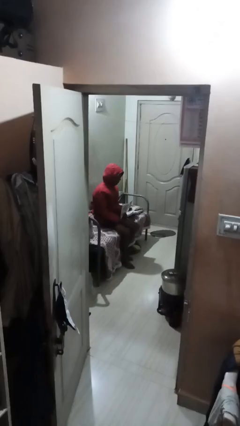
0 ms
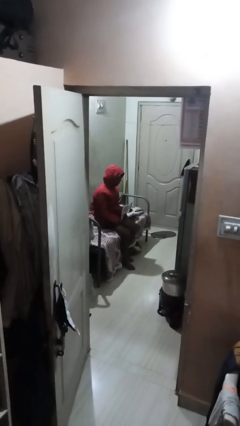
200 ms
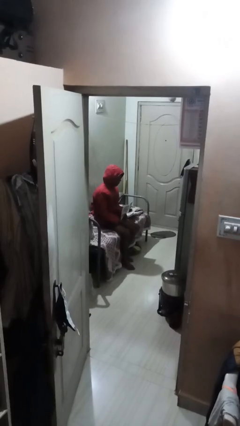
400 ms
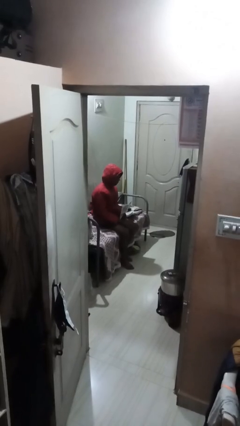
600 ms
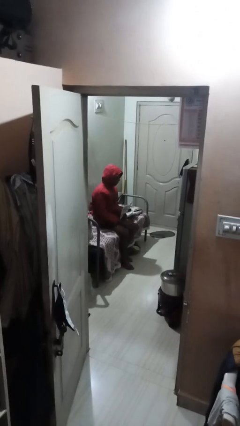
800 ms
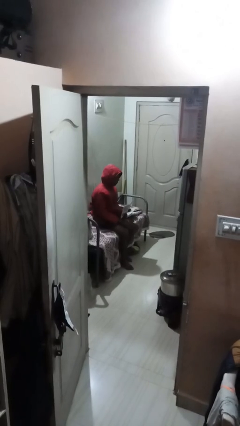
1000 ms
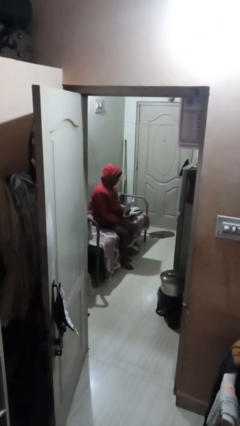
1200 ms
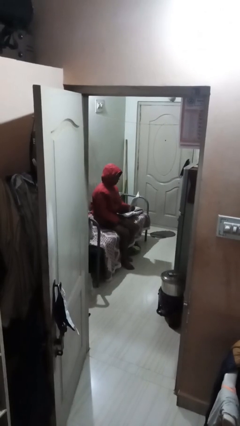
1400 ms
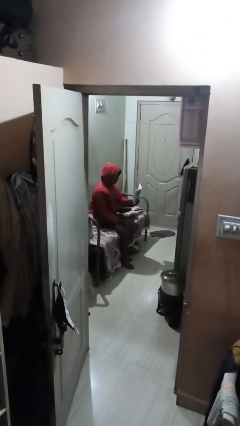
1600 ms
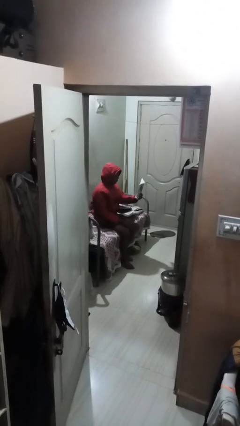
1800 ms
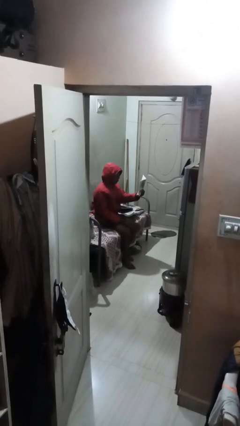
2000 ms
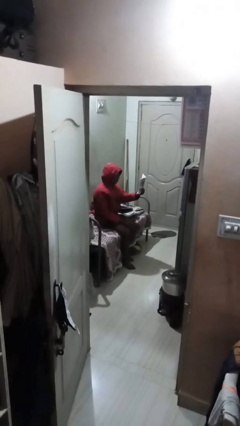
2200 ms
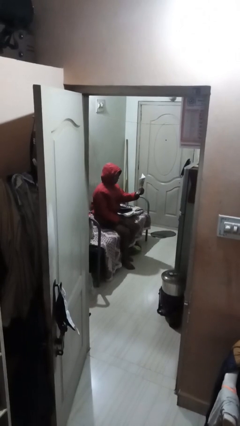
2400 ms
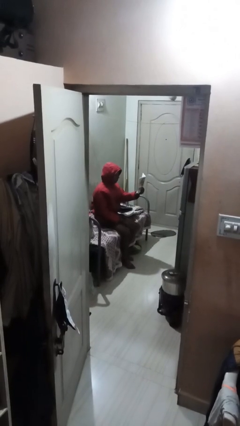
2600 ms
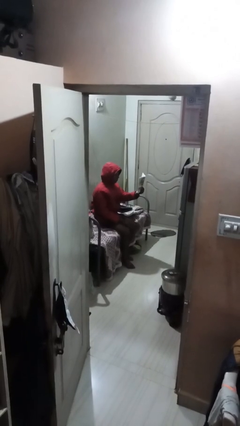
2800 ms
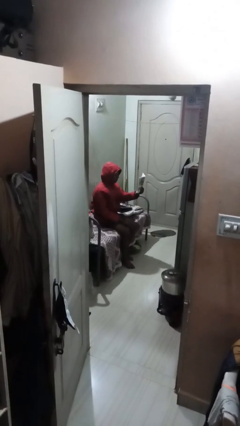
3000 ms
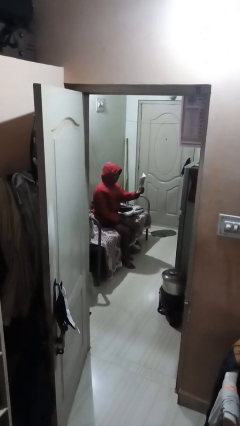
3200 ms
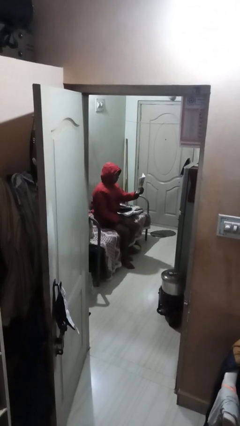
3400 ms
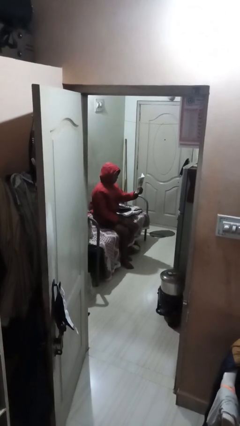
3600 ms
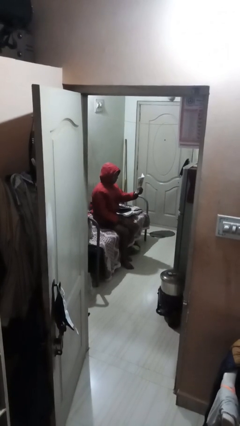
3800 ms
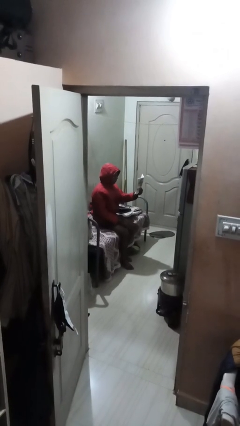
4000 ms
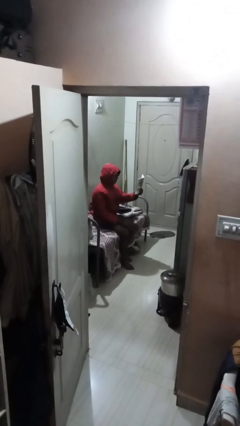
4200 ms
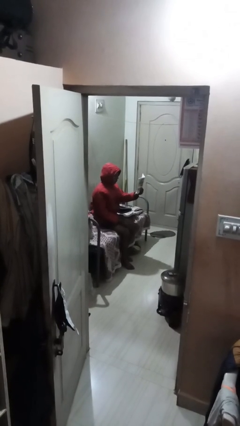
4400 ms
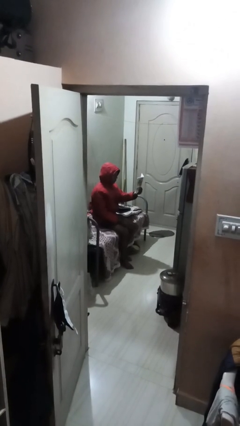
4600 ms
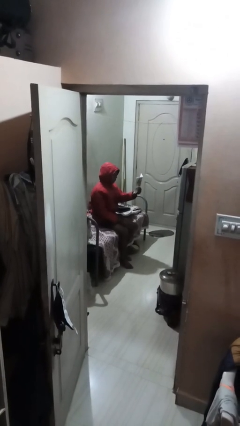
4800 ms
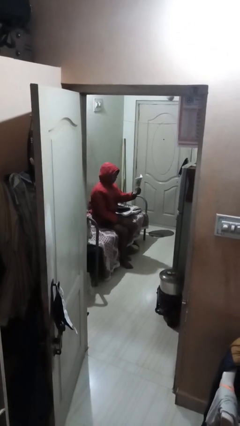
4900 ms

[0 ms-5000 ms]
person reads document

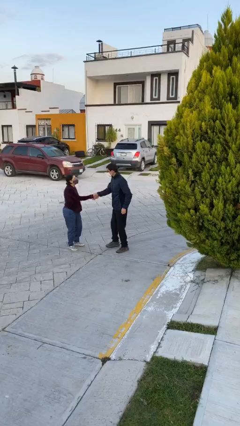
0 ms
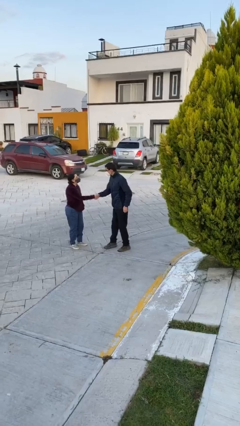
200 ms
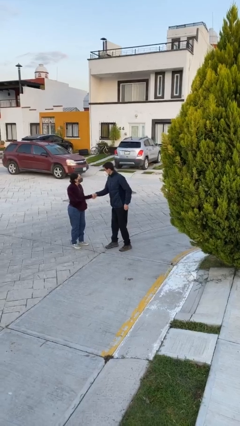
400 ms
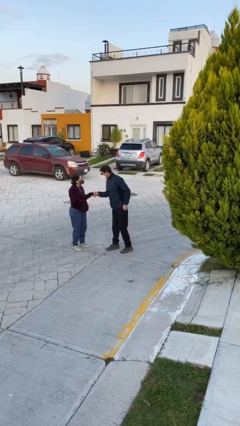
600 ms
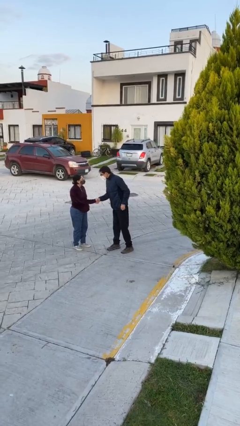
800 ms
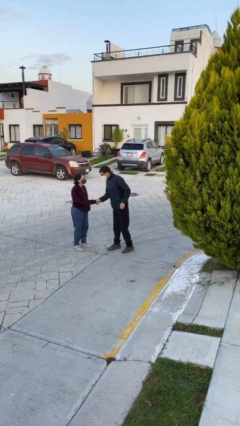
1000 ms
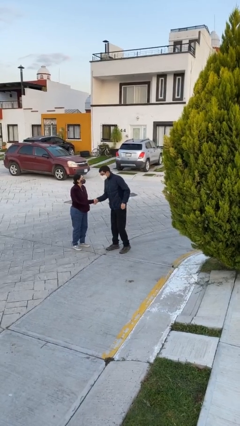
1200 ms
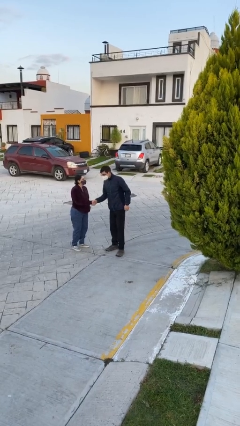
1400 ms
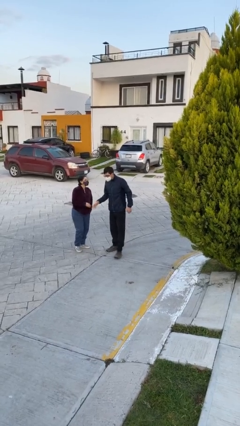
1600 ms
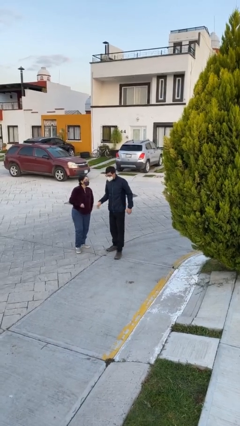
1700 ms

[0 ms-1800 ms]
person shakes hand

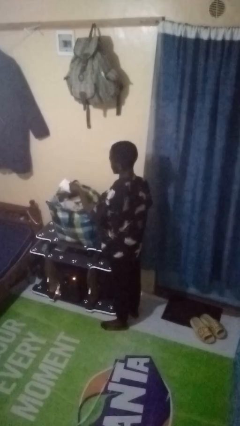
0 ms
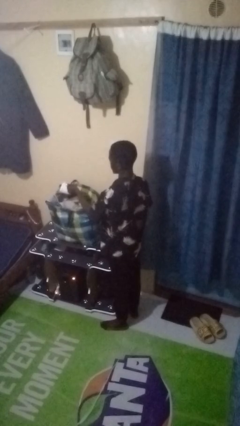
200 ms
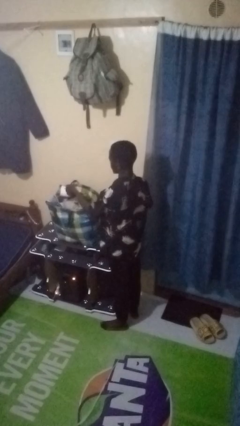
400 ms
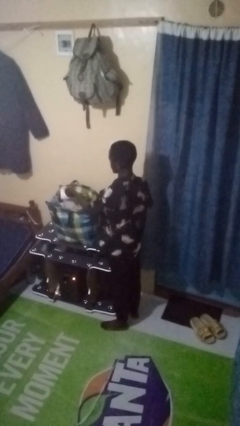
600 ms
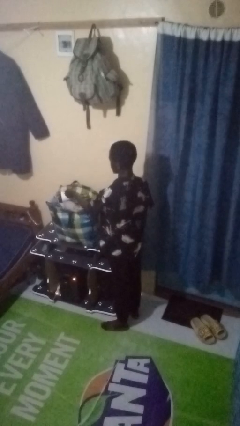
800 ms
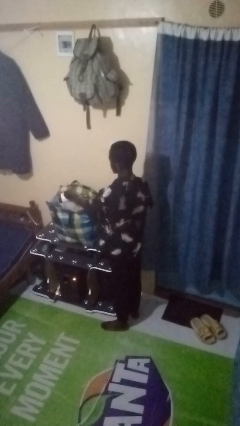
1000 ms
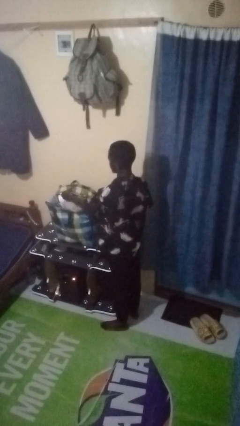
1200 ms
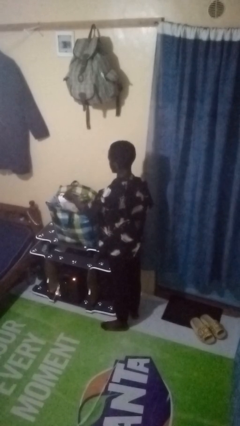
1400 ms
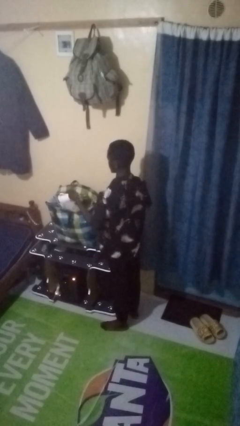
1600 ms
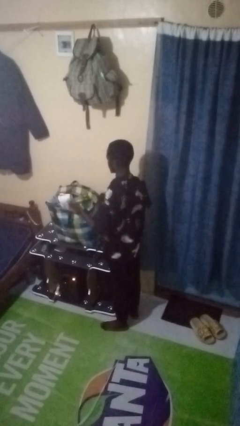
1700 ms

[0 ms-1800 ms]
person puts object into bag

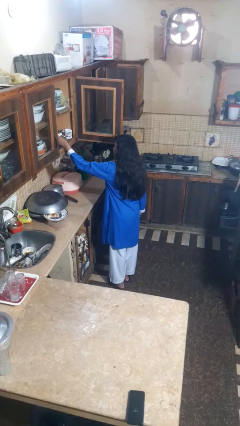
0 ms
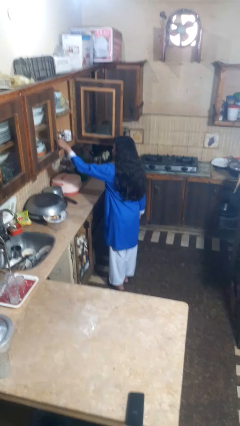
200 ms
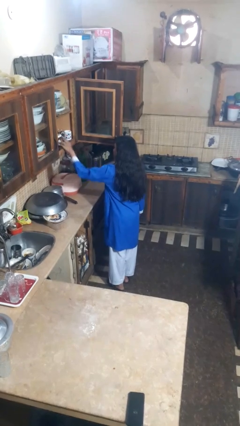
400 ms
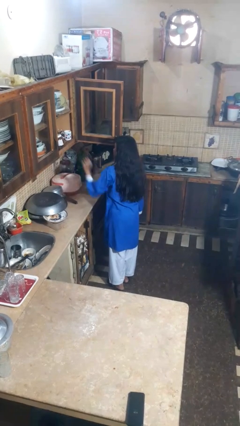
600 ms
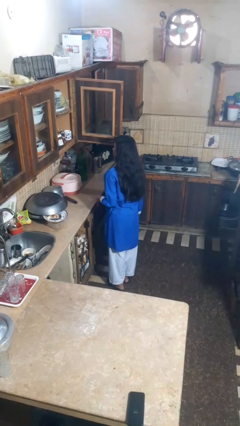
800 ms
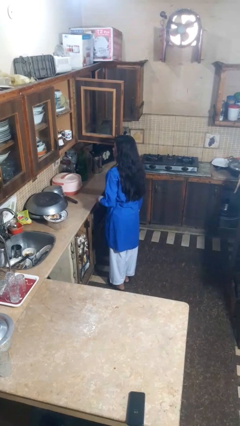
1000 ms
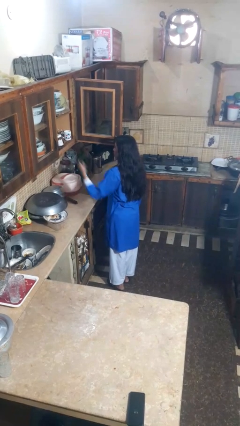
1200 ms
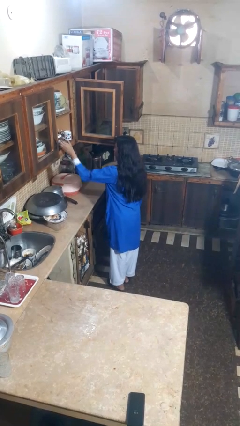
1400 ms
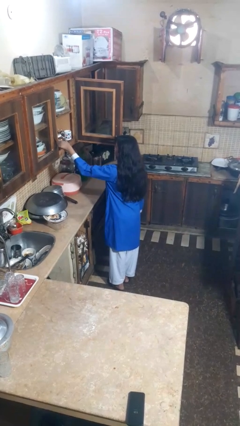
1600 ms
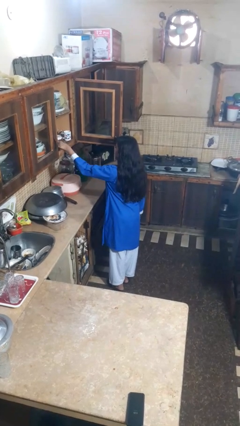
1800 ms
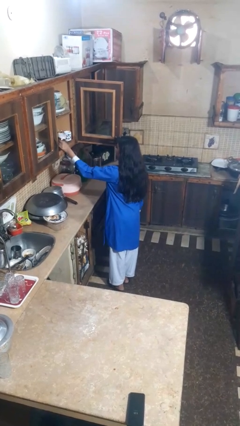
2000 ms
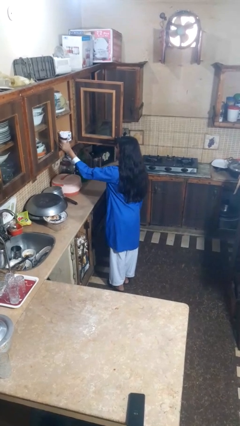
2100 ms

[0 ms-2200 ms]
person takes object from cabinet

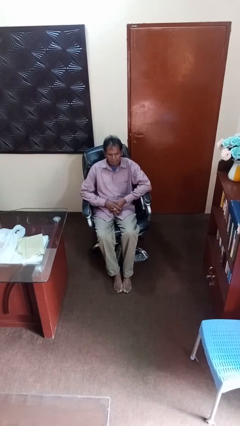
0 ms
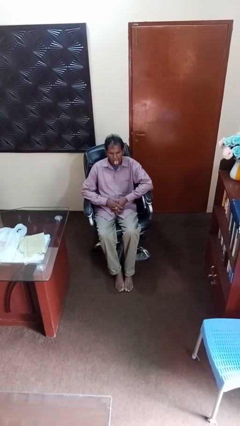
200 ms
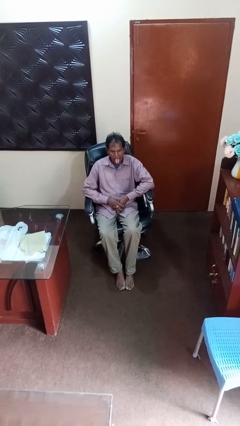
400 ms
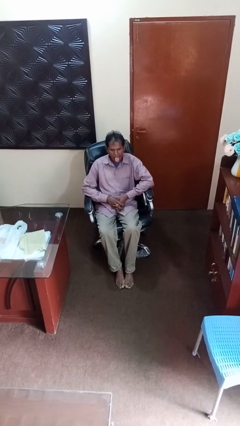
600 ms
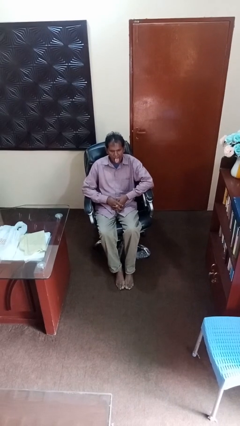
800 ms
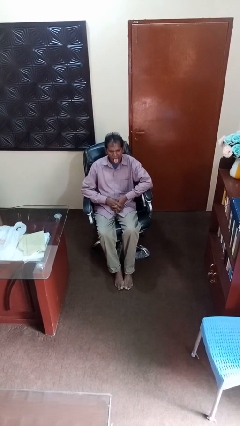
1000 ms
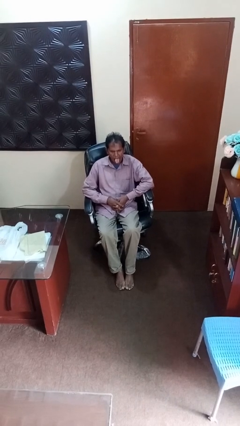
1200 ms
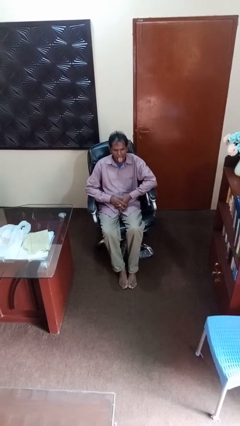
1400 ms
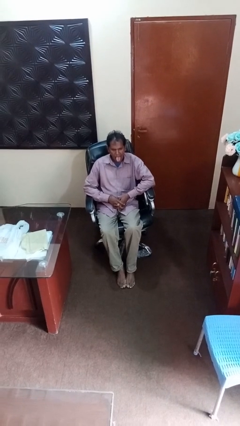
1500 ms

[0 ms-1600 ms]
person sticks out tongue

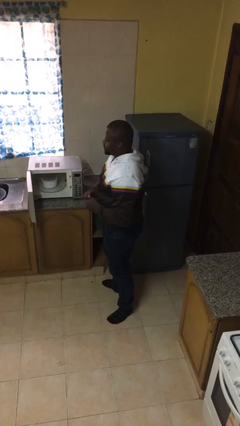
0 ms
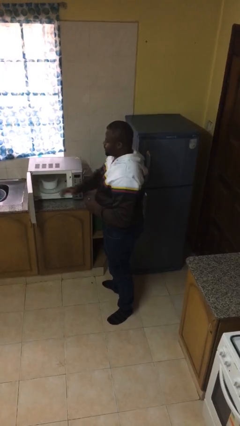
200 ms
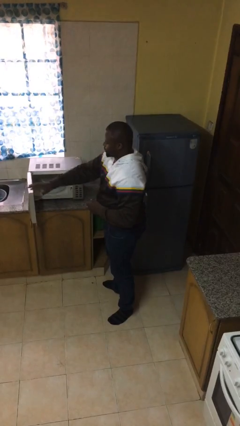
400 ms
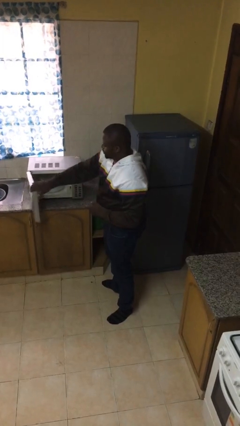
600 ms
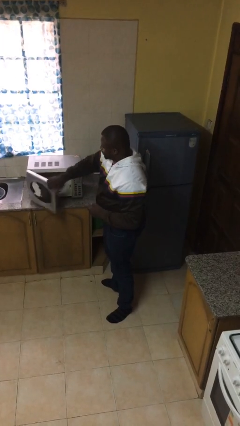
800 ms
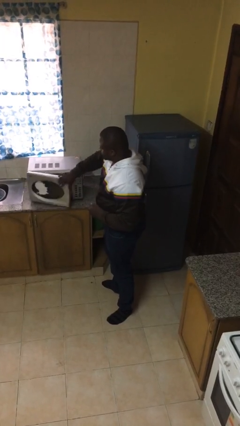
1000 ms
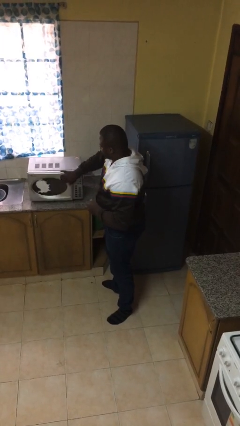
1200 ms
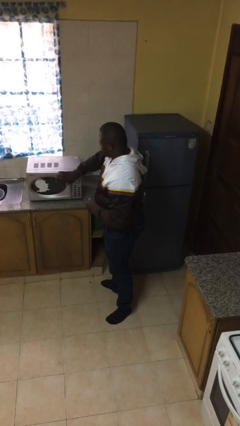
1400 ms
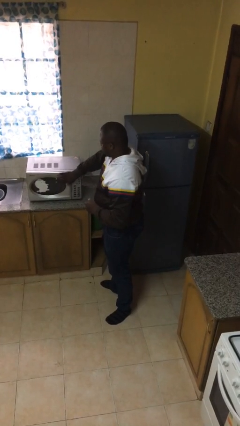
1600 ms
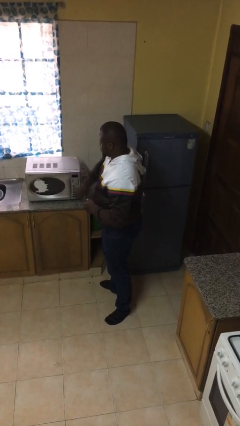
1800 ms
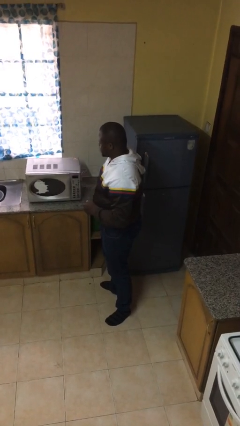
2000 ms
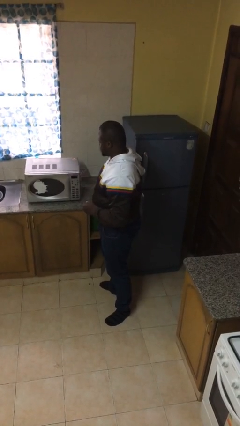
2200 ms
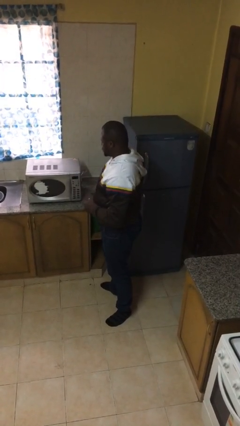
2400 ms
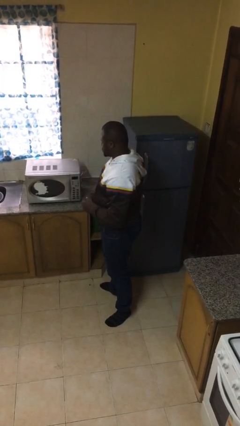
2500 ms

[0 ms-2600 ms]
person closes microwave

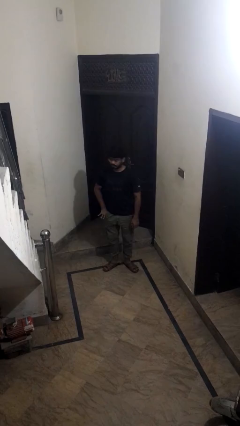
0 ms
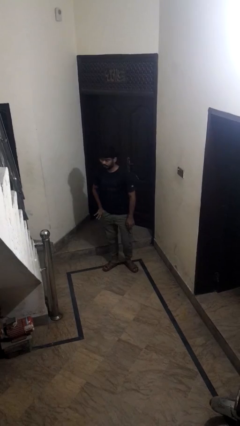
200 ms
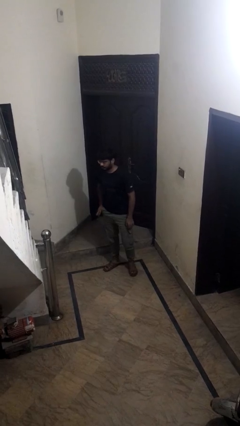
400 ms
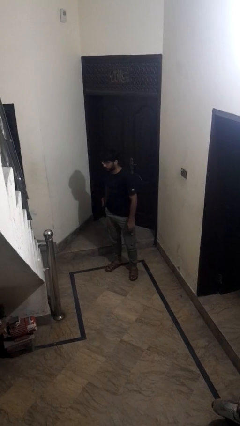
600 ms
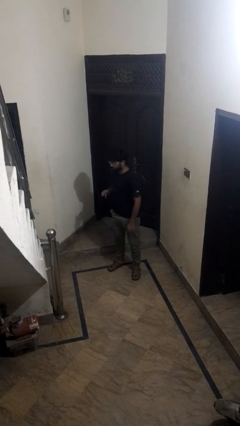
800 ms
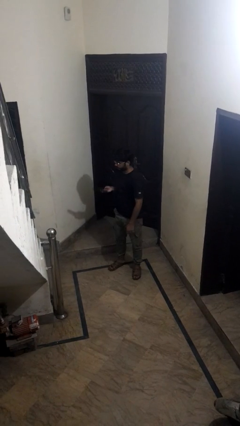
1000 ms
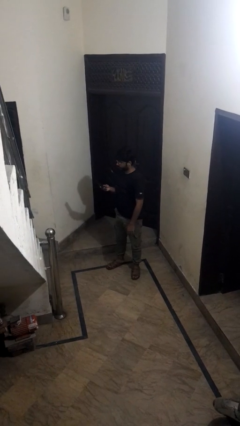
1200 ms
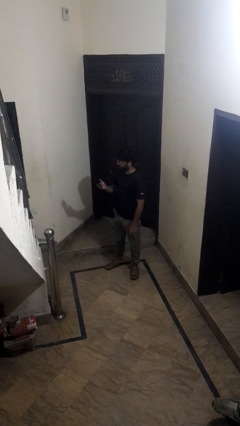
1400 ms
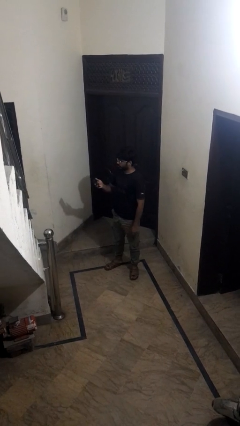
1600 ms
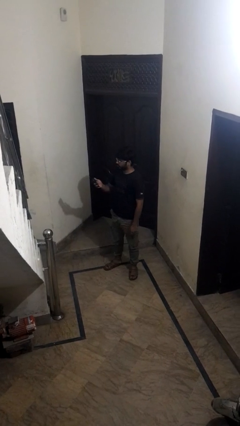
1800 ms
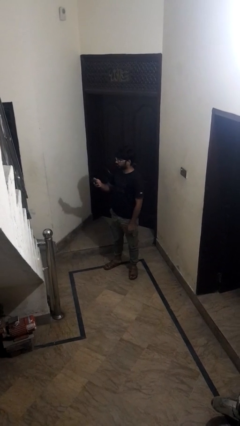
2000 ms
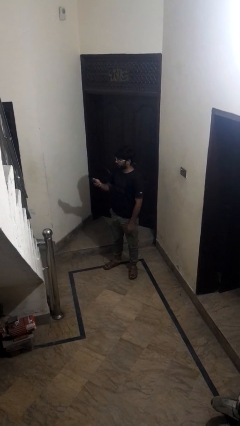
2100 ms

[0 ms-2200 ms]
person takes phone from pocket

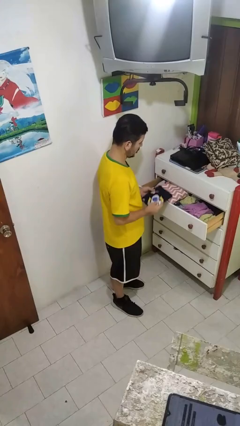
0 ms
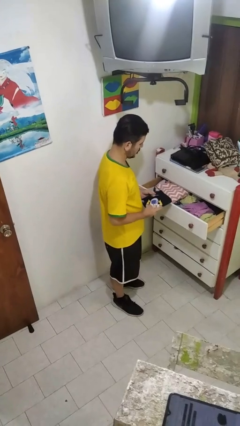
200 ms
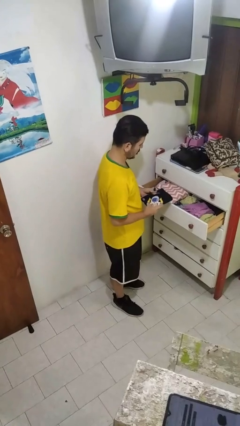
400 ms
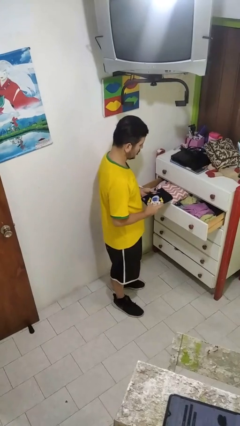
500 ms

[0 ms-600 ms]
person takes clothes from dresser
